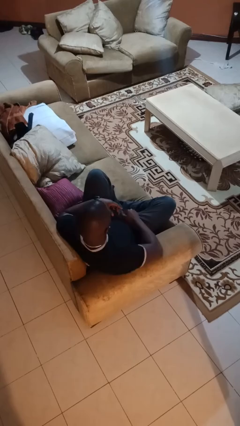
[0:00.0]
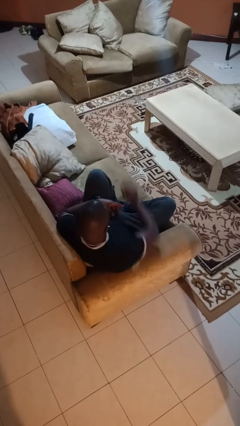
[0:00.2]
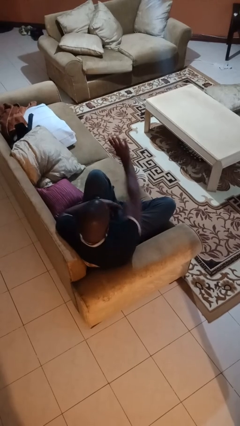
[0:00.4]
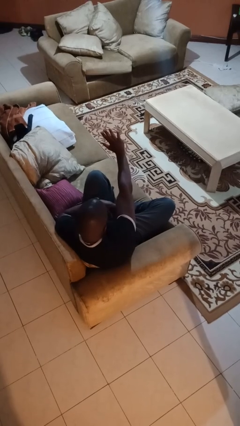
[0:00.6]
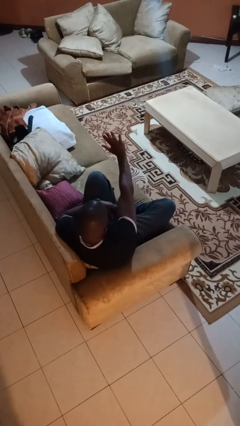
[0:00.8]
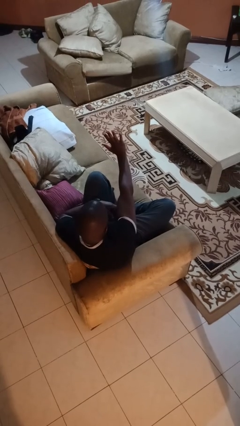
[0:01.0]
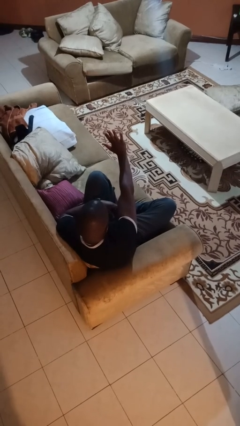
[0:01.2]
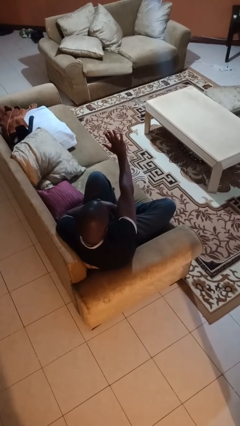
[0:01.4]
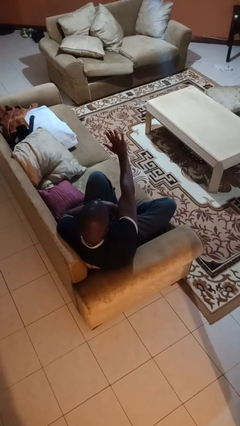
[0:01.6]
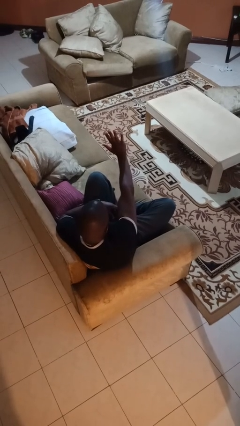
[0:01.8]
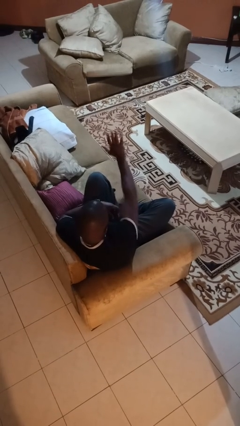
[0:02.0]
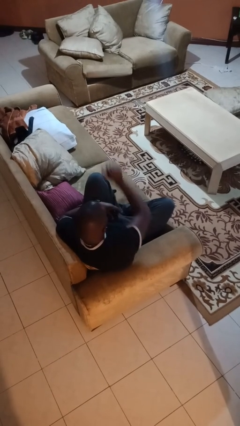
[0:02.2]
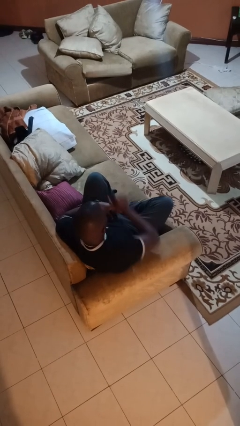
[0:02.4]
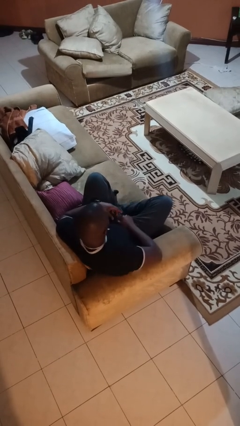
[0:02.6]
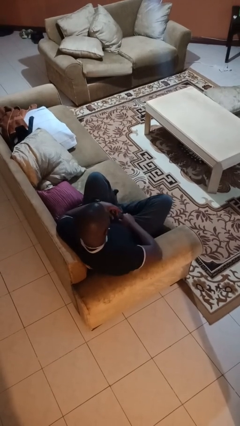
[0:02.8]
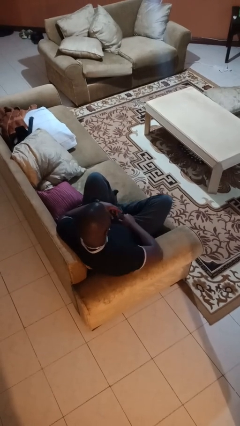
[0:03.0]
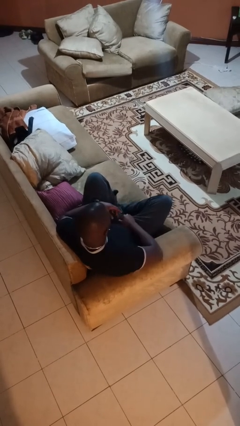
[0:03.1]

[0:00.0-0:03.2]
person gestures stop

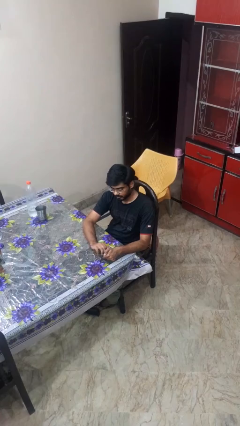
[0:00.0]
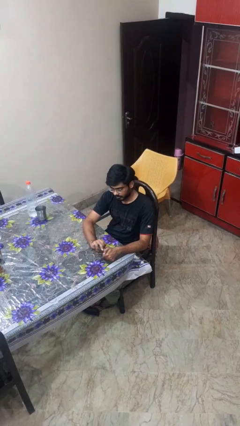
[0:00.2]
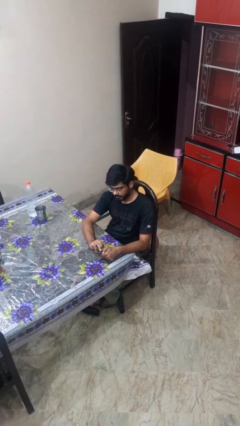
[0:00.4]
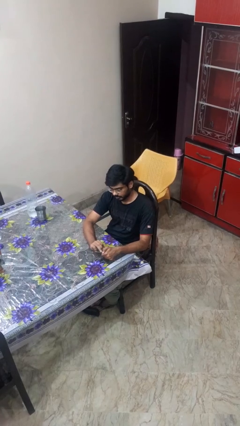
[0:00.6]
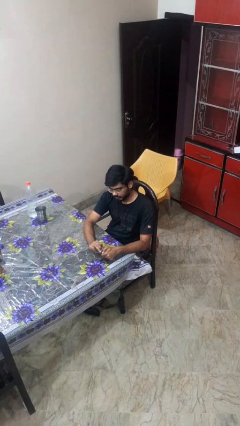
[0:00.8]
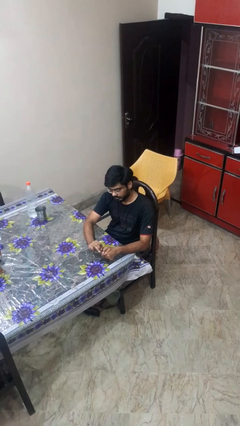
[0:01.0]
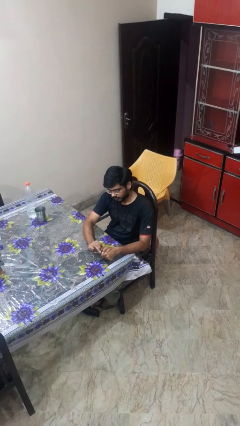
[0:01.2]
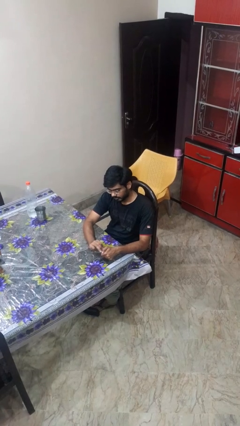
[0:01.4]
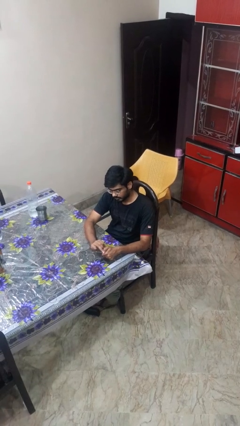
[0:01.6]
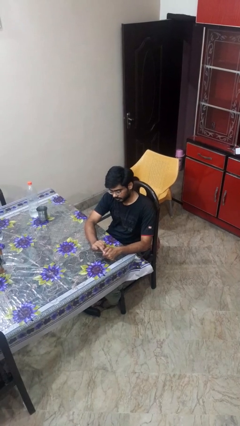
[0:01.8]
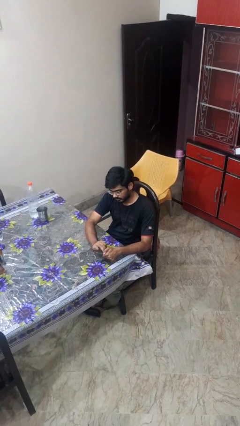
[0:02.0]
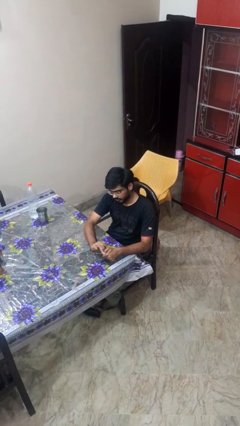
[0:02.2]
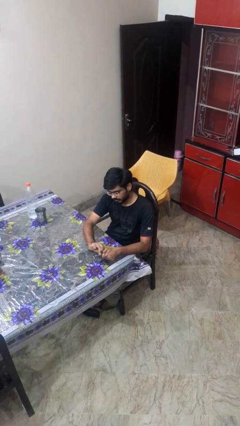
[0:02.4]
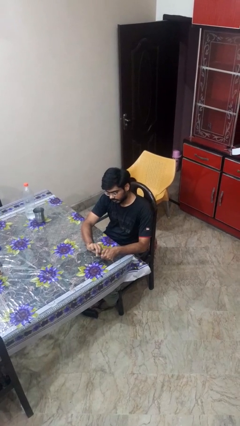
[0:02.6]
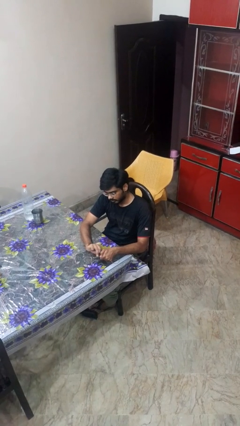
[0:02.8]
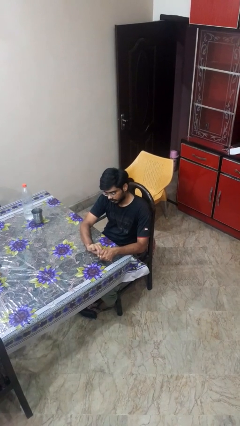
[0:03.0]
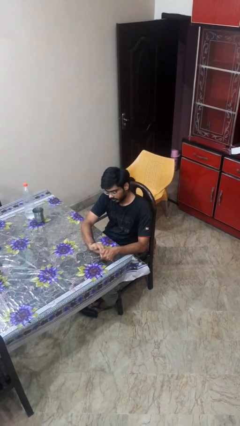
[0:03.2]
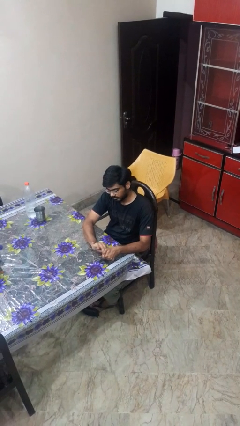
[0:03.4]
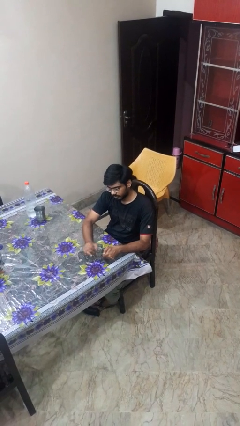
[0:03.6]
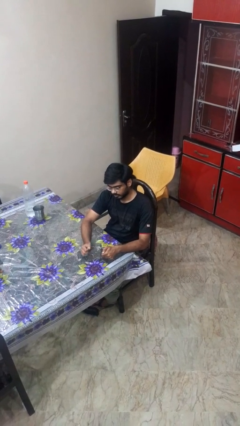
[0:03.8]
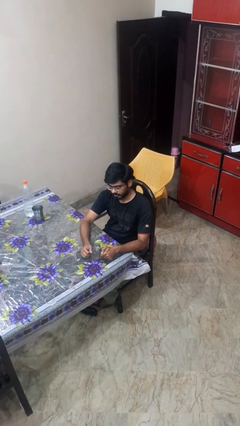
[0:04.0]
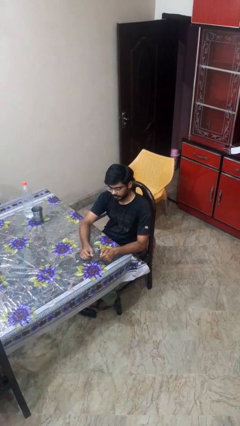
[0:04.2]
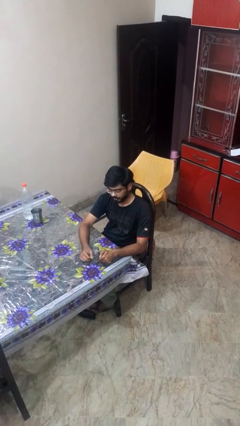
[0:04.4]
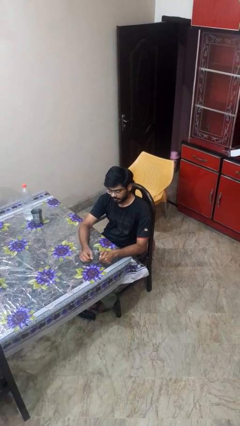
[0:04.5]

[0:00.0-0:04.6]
person files fingernails

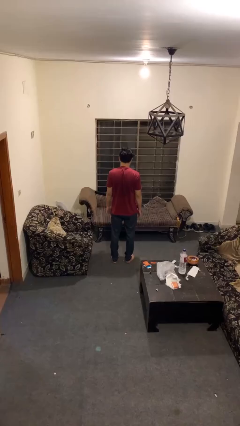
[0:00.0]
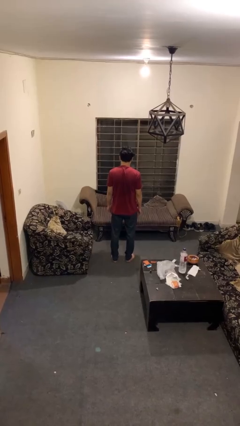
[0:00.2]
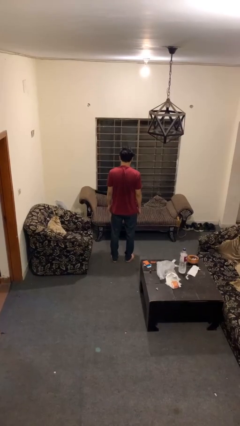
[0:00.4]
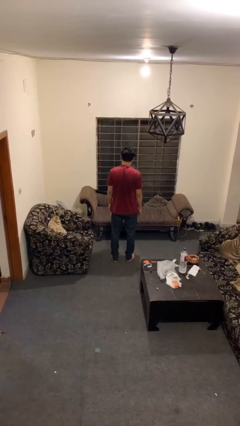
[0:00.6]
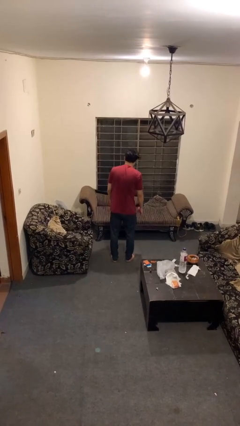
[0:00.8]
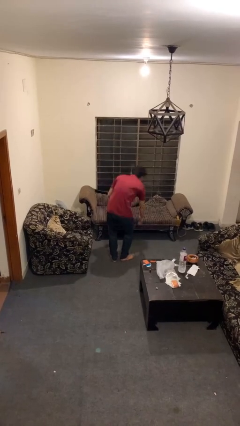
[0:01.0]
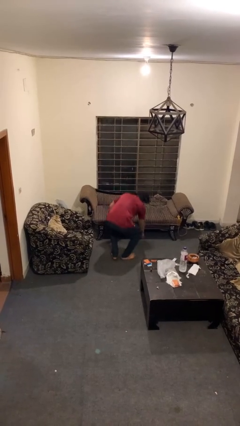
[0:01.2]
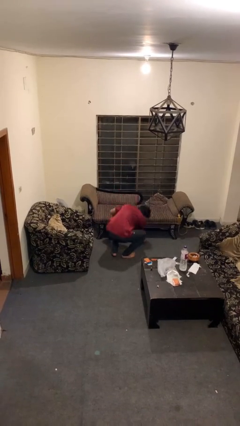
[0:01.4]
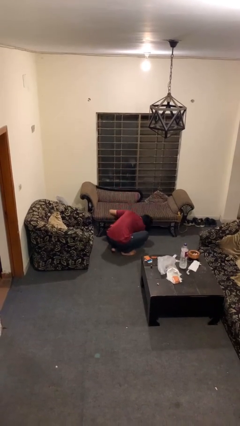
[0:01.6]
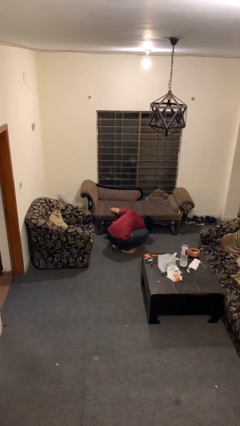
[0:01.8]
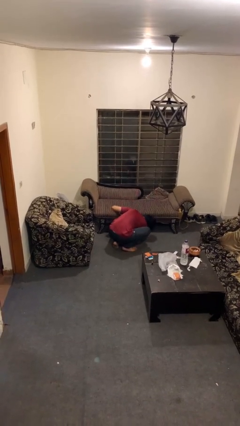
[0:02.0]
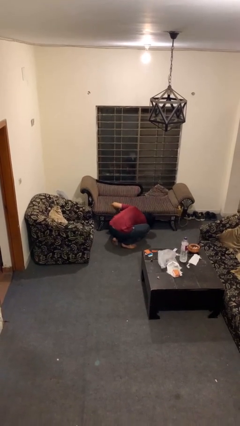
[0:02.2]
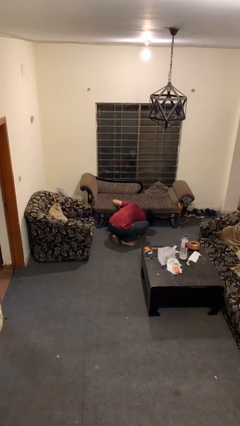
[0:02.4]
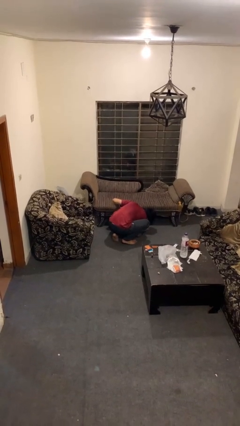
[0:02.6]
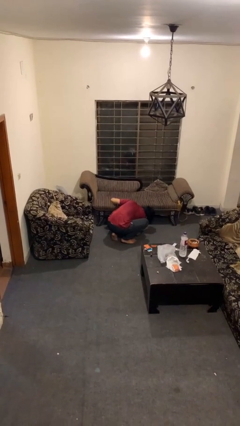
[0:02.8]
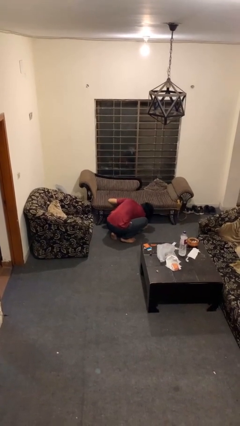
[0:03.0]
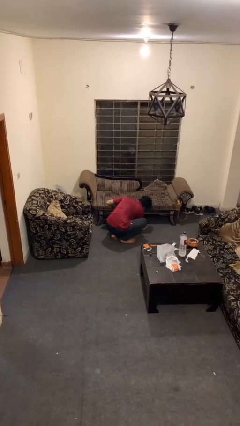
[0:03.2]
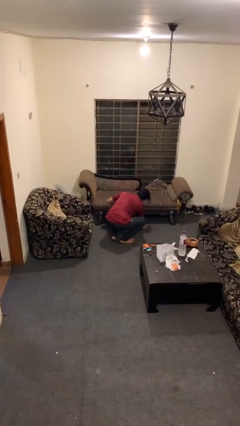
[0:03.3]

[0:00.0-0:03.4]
person searches under couch

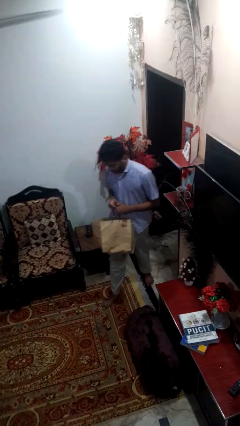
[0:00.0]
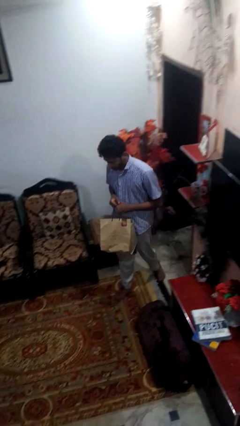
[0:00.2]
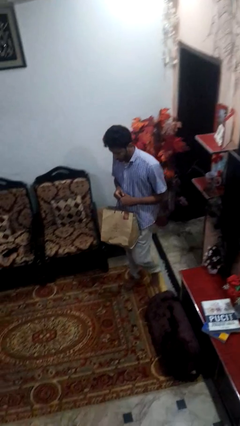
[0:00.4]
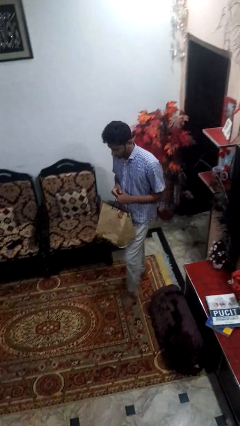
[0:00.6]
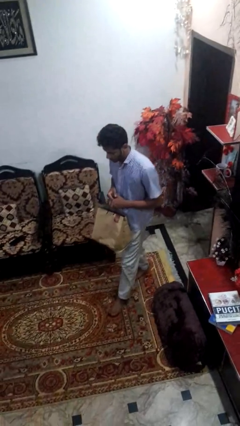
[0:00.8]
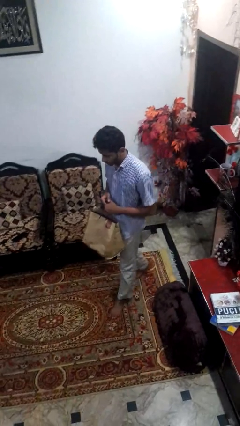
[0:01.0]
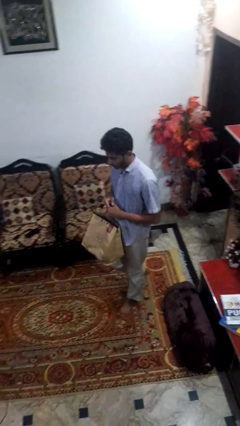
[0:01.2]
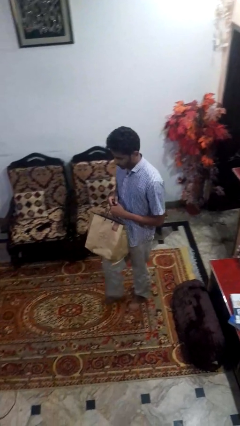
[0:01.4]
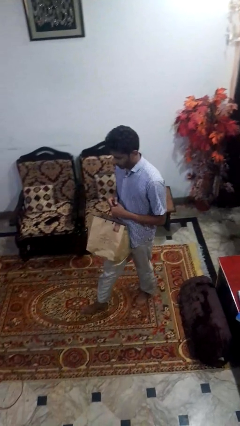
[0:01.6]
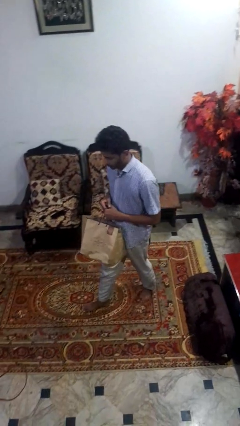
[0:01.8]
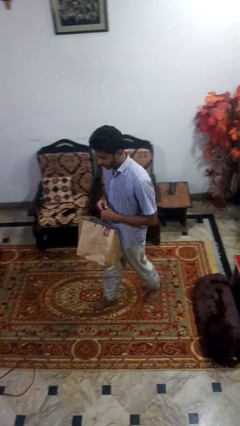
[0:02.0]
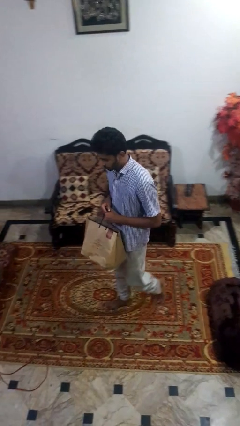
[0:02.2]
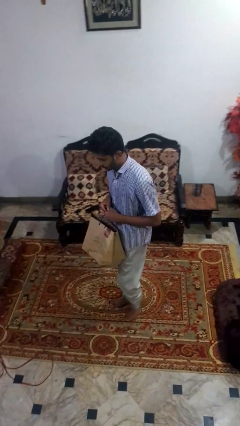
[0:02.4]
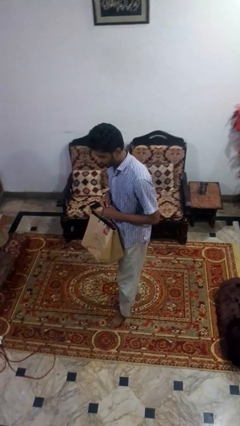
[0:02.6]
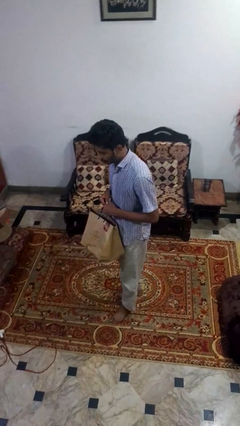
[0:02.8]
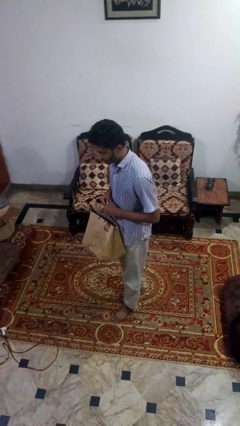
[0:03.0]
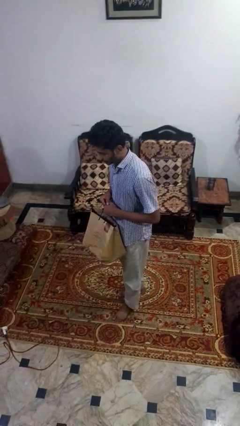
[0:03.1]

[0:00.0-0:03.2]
person carries groceries
